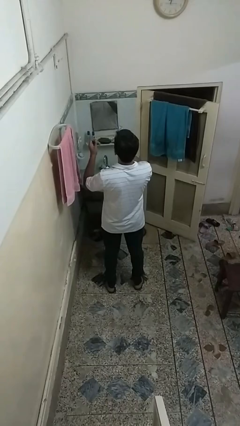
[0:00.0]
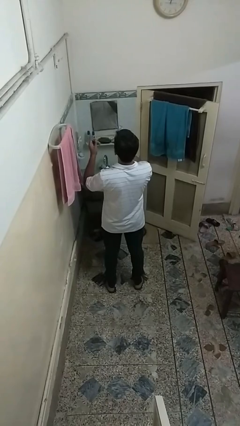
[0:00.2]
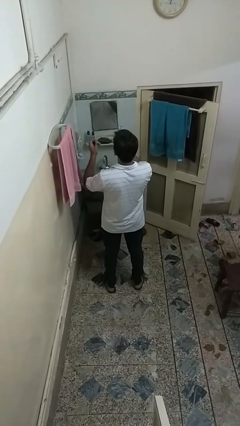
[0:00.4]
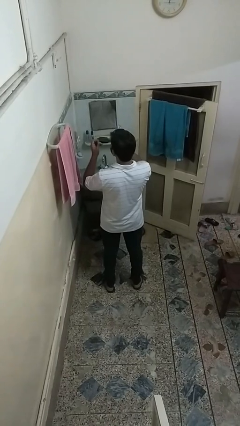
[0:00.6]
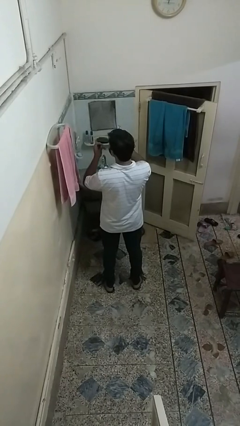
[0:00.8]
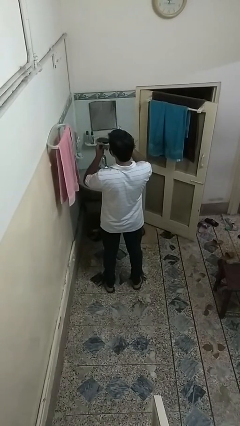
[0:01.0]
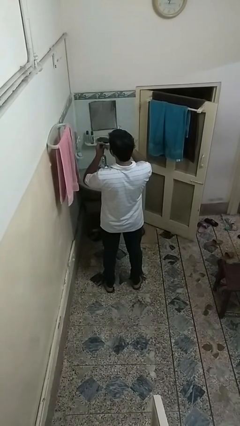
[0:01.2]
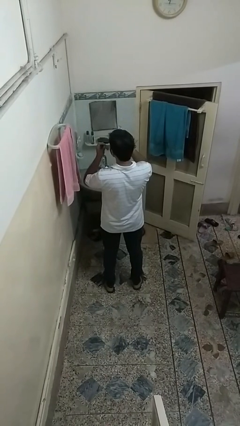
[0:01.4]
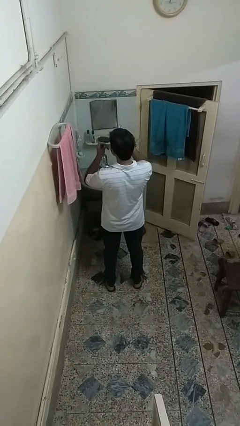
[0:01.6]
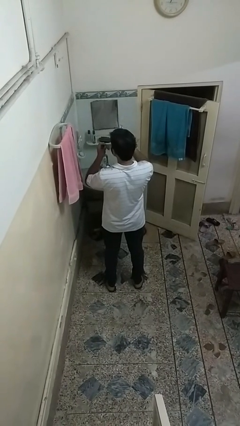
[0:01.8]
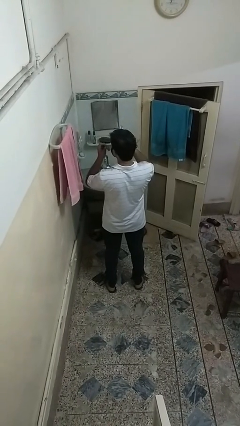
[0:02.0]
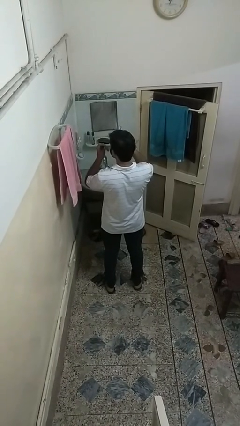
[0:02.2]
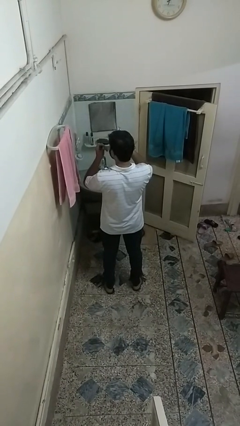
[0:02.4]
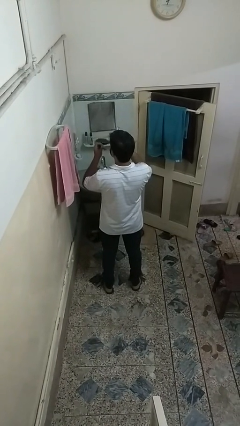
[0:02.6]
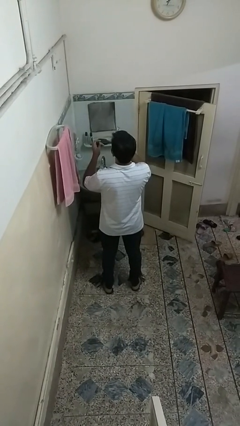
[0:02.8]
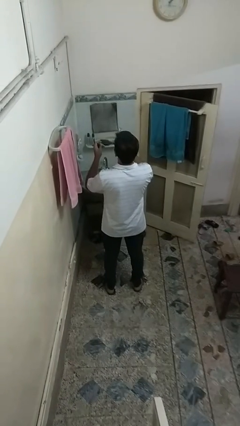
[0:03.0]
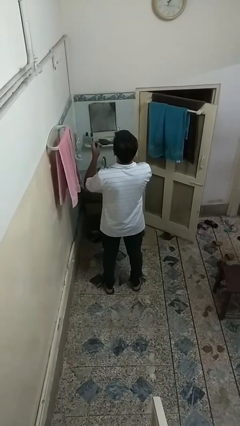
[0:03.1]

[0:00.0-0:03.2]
person flosses

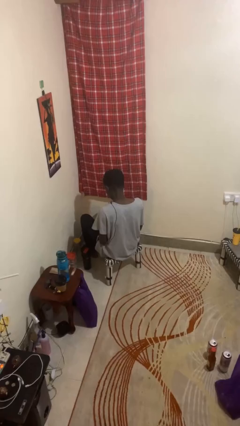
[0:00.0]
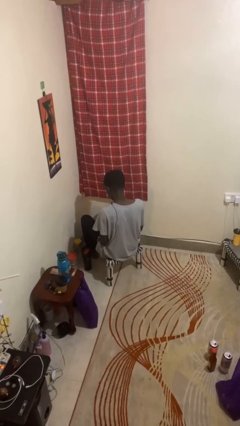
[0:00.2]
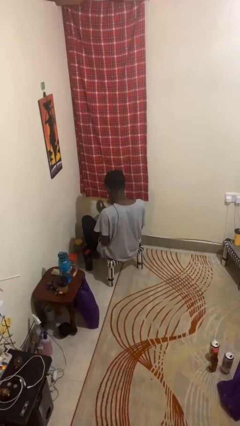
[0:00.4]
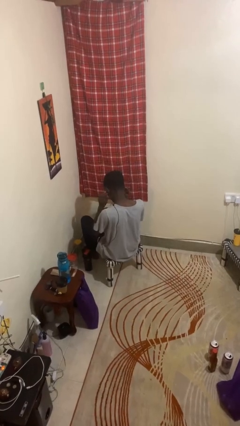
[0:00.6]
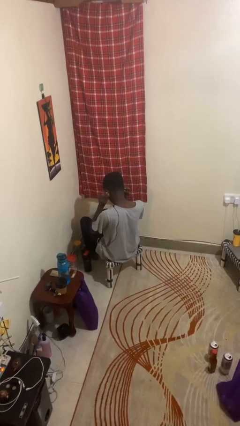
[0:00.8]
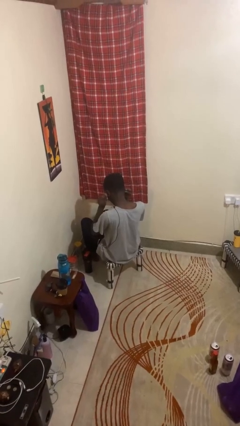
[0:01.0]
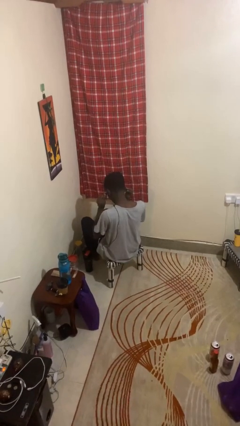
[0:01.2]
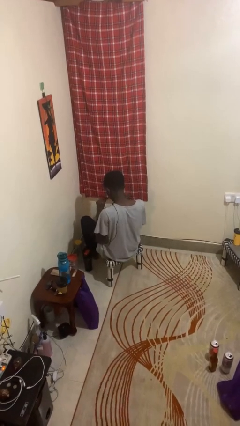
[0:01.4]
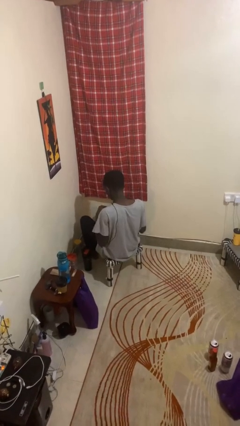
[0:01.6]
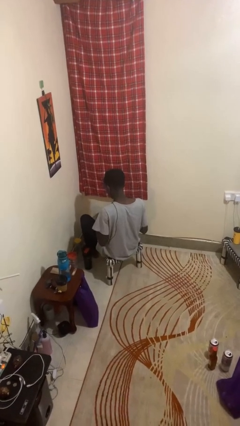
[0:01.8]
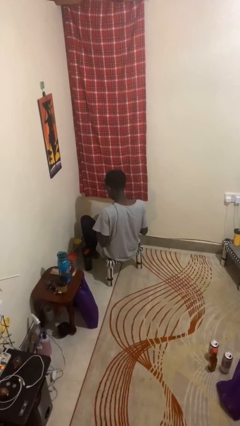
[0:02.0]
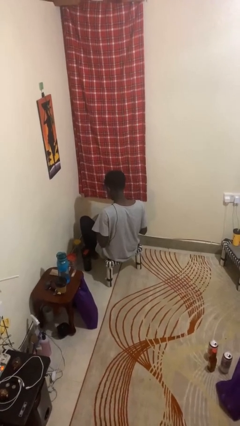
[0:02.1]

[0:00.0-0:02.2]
person takes off headphones

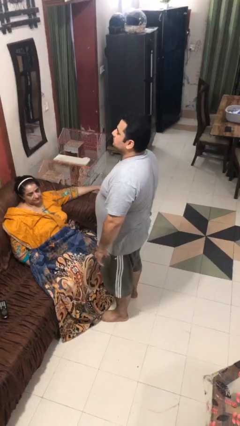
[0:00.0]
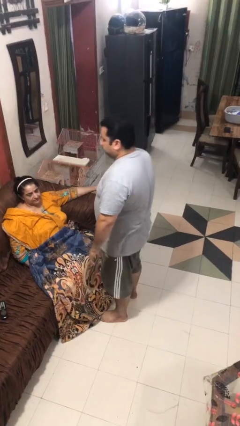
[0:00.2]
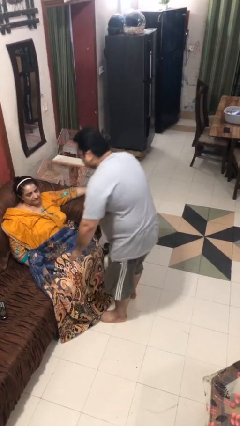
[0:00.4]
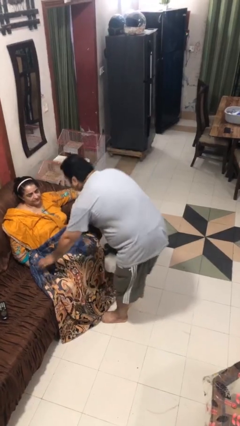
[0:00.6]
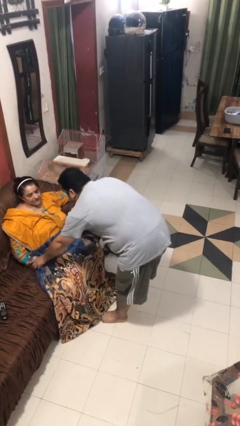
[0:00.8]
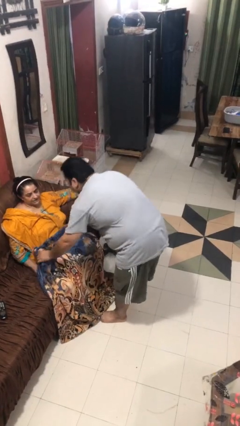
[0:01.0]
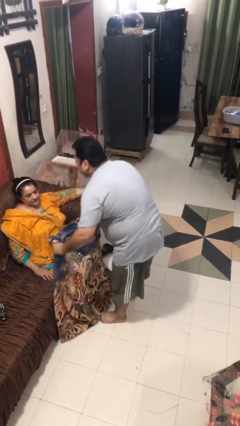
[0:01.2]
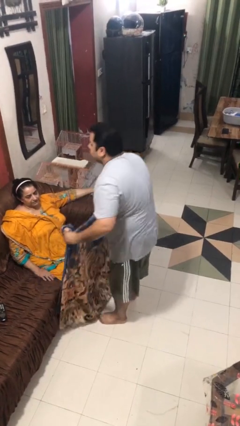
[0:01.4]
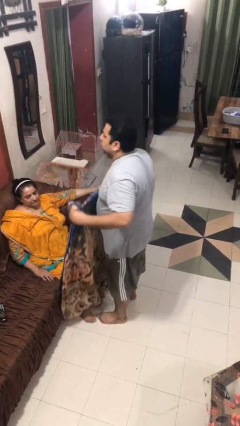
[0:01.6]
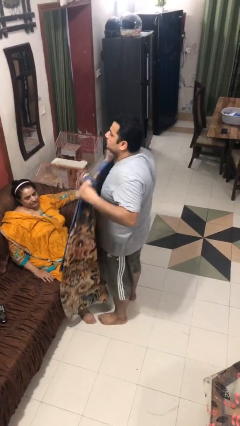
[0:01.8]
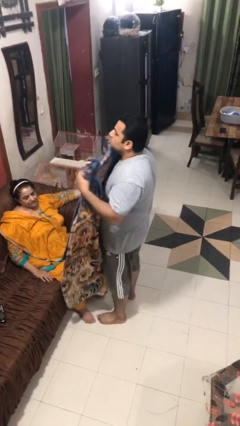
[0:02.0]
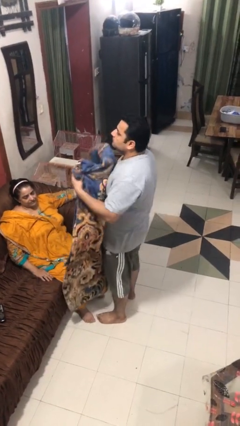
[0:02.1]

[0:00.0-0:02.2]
person uncovers friend with blanket

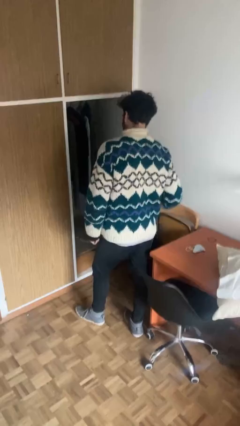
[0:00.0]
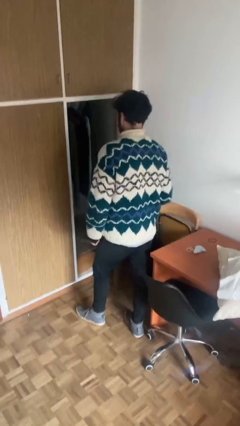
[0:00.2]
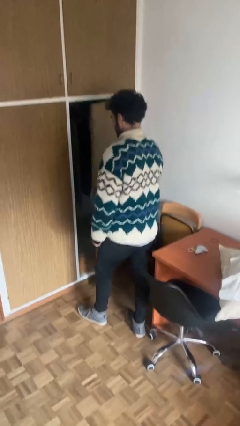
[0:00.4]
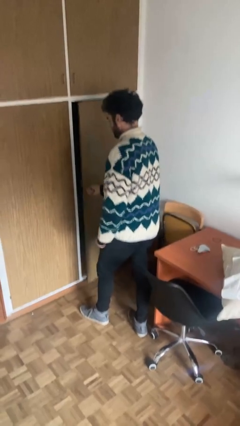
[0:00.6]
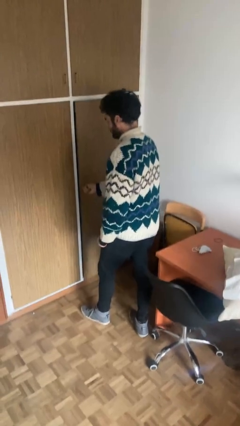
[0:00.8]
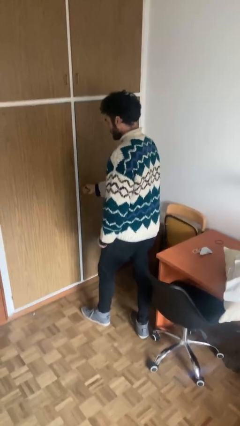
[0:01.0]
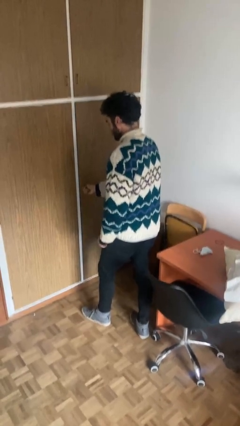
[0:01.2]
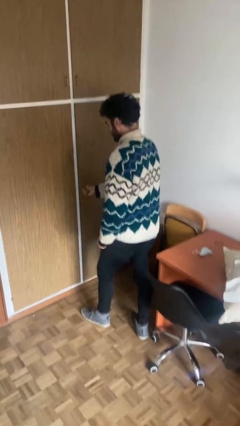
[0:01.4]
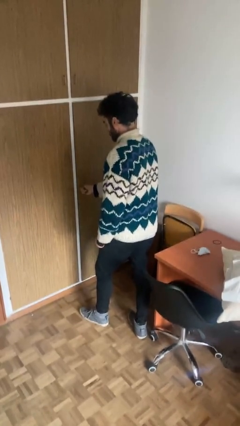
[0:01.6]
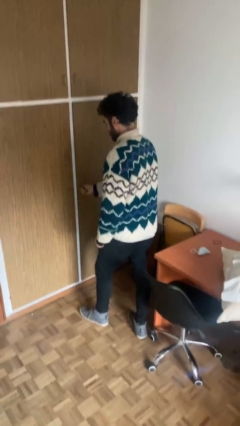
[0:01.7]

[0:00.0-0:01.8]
person closes closet door

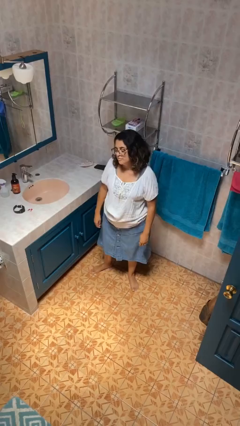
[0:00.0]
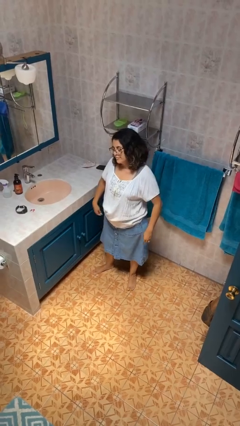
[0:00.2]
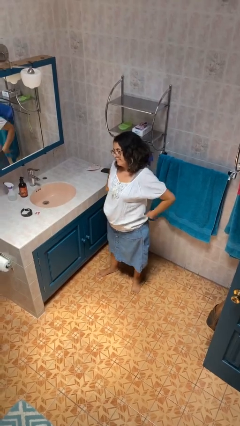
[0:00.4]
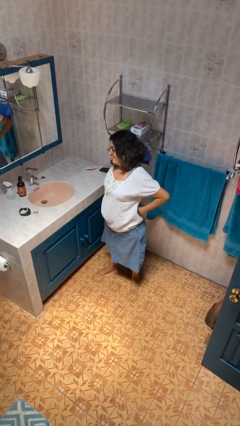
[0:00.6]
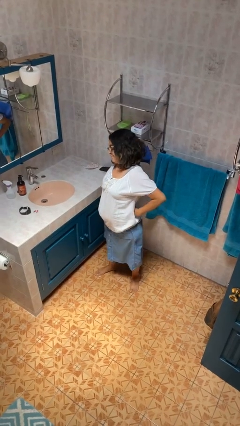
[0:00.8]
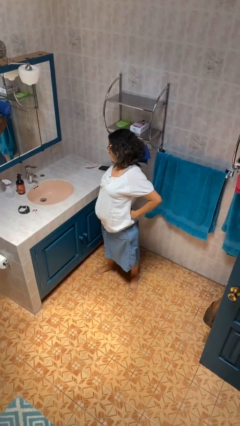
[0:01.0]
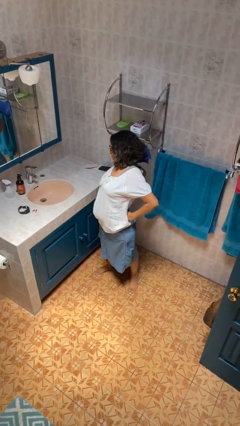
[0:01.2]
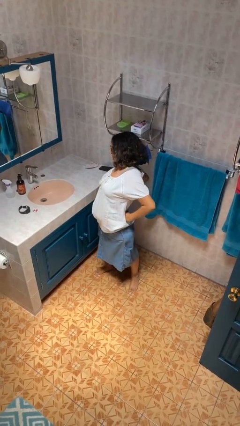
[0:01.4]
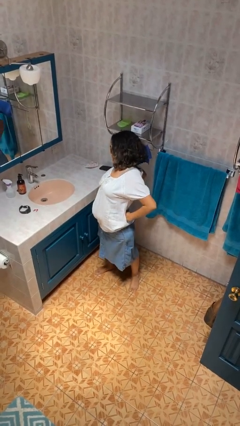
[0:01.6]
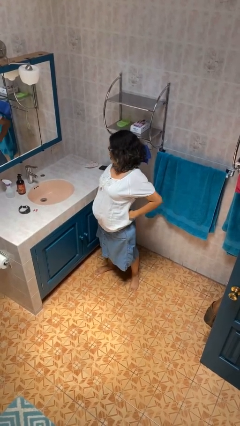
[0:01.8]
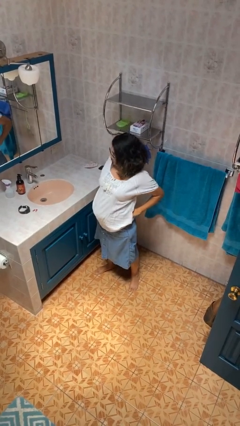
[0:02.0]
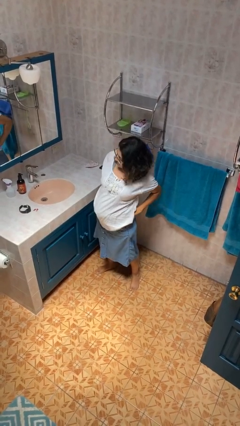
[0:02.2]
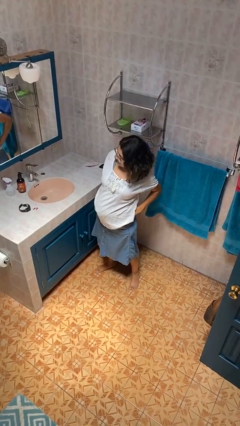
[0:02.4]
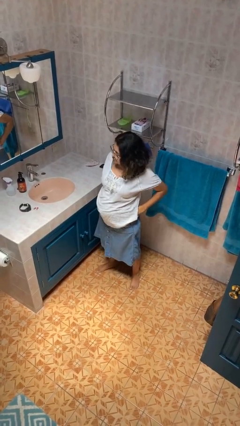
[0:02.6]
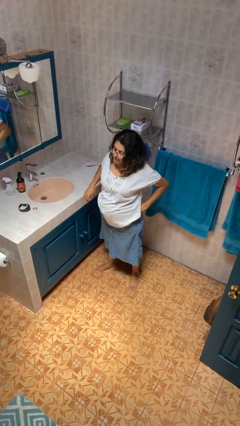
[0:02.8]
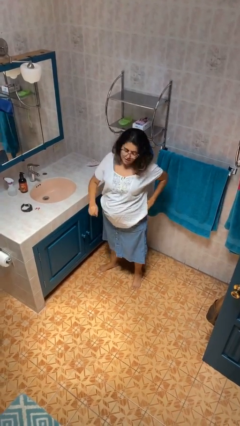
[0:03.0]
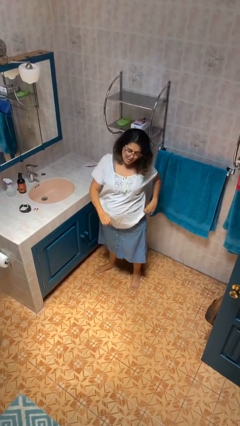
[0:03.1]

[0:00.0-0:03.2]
person stretches back

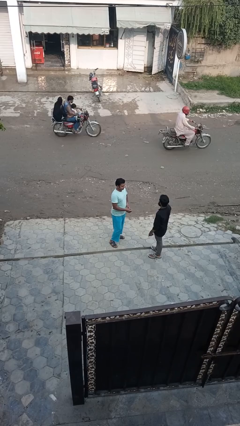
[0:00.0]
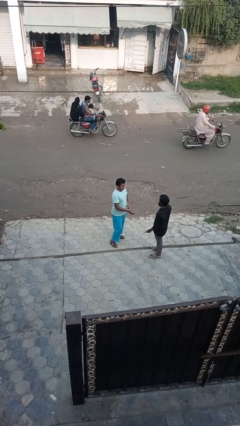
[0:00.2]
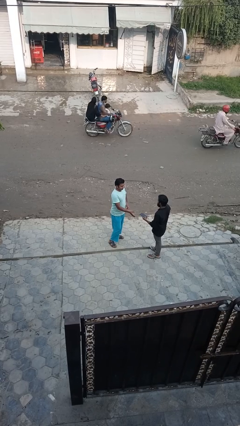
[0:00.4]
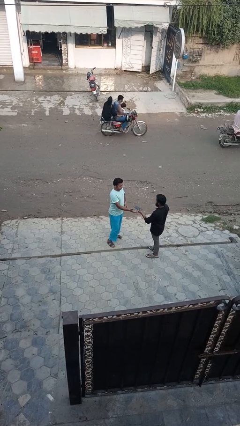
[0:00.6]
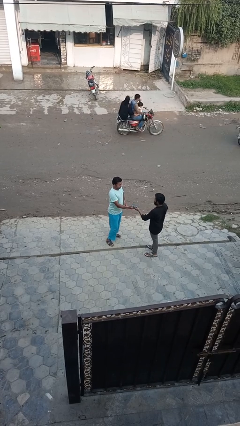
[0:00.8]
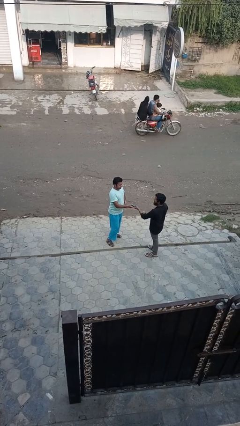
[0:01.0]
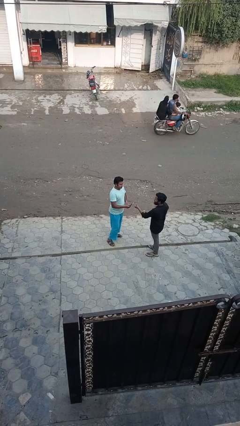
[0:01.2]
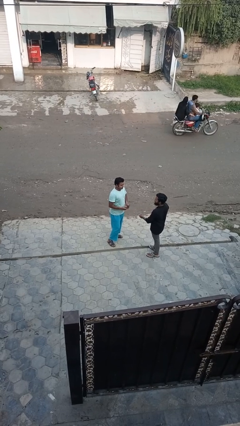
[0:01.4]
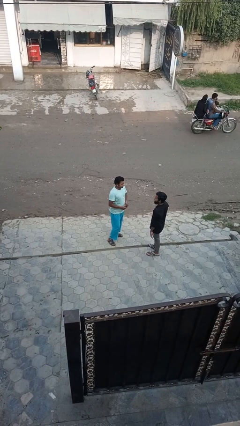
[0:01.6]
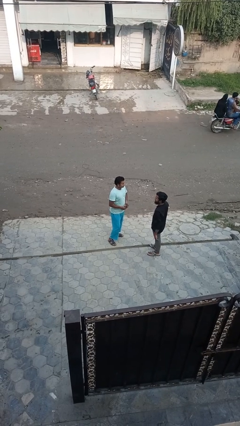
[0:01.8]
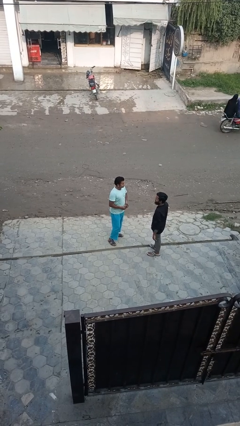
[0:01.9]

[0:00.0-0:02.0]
person transfers object to person

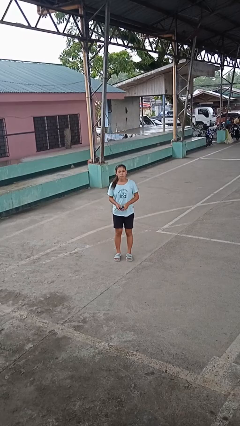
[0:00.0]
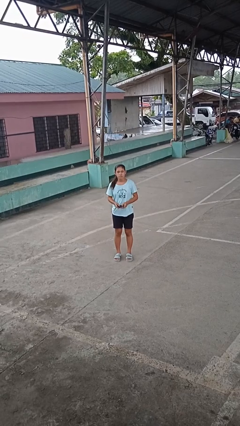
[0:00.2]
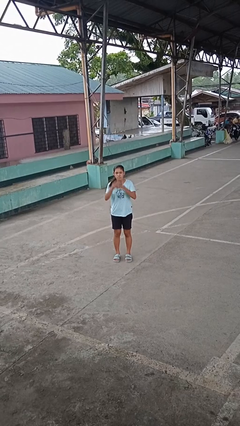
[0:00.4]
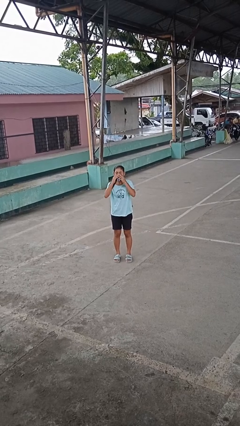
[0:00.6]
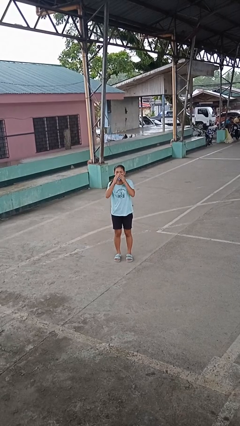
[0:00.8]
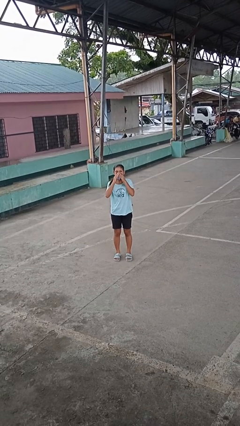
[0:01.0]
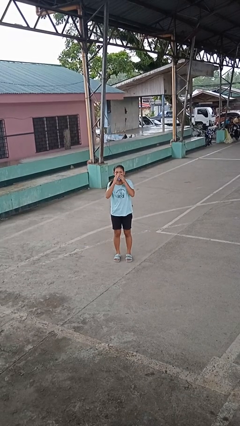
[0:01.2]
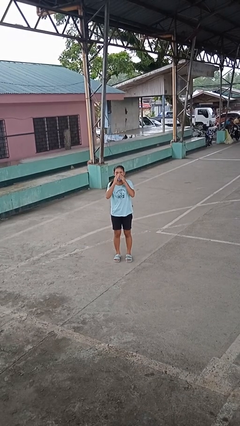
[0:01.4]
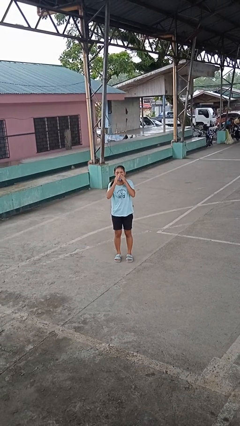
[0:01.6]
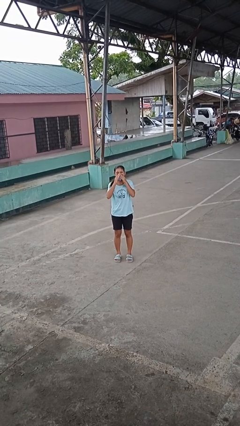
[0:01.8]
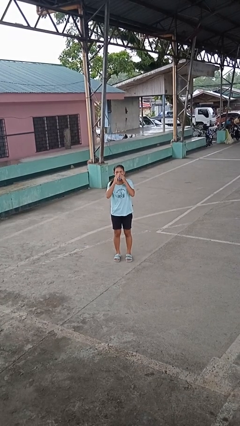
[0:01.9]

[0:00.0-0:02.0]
person blows nose
